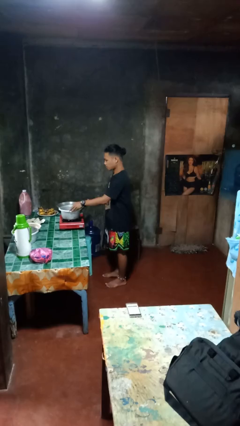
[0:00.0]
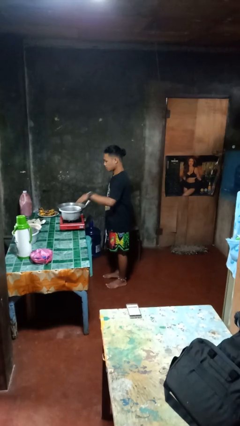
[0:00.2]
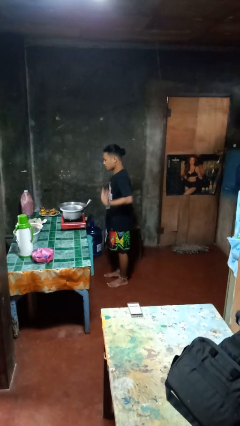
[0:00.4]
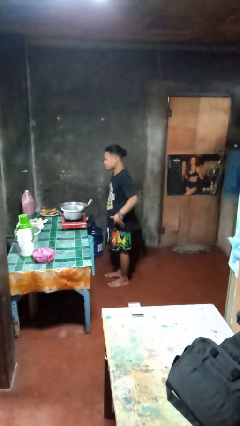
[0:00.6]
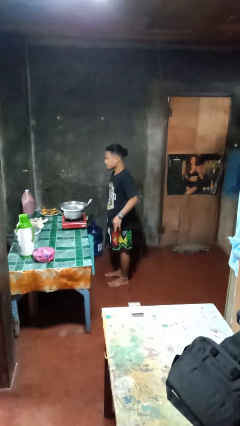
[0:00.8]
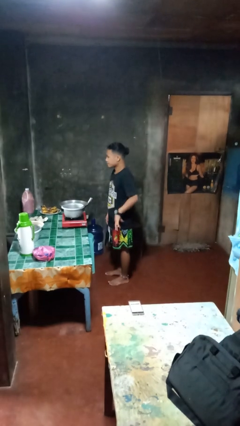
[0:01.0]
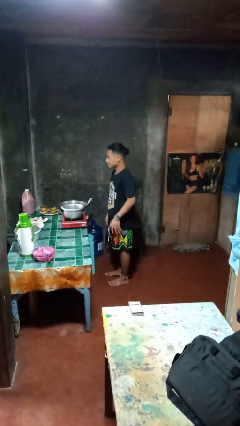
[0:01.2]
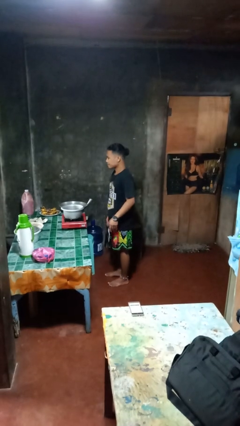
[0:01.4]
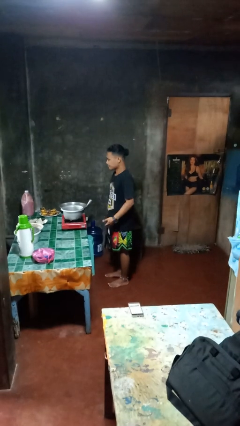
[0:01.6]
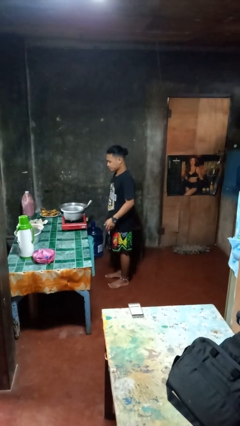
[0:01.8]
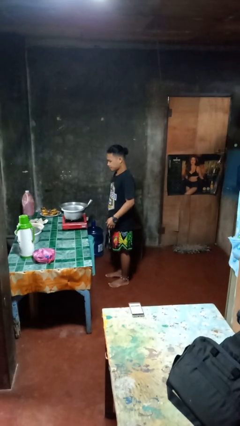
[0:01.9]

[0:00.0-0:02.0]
person burns hand

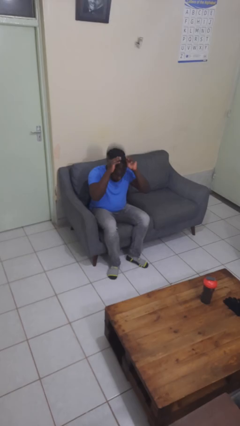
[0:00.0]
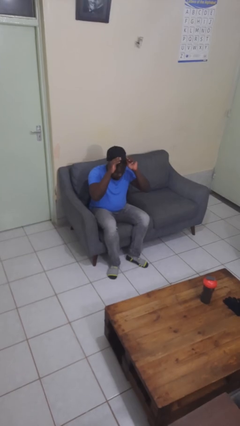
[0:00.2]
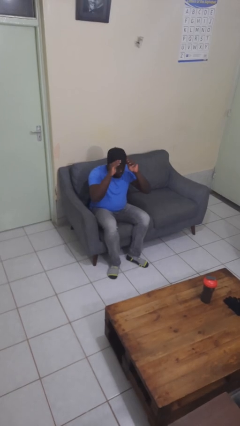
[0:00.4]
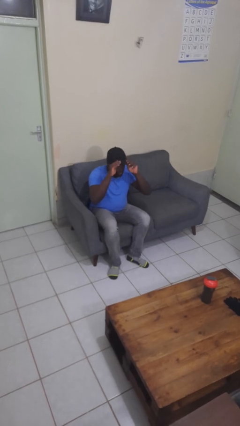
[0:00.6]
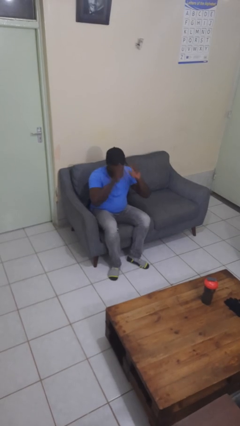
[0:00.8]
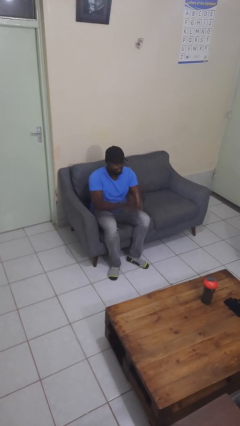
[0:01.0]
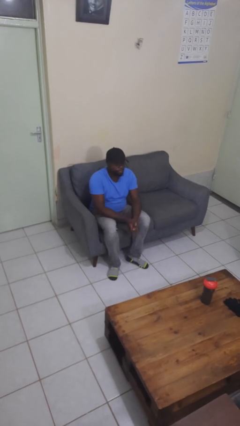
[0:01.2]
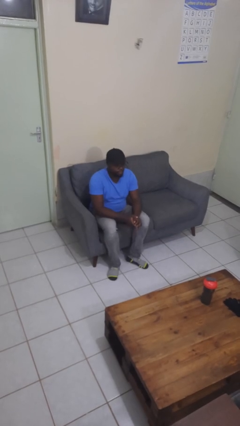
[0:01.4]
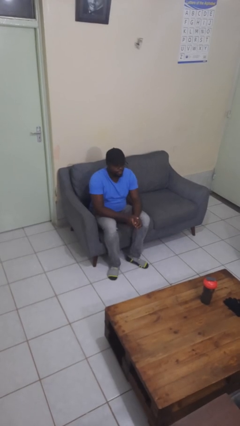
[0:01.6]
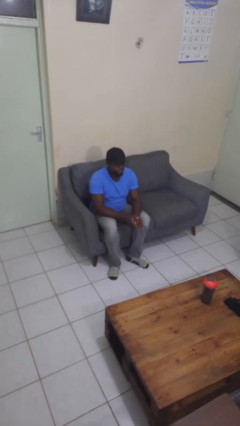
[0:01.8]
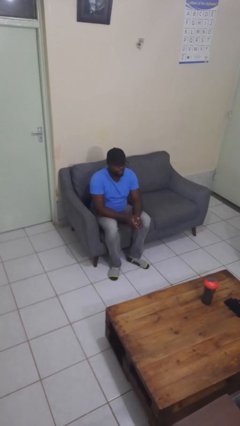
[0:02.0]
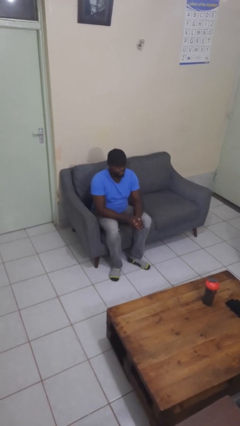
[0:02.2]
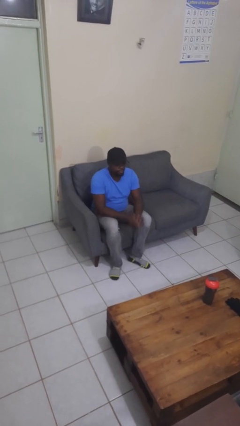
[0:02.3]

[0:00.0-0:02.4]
person puts on hat

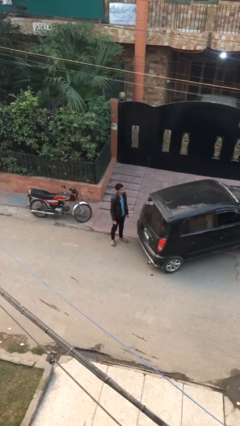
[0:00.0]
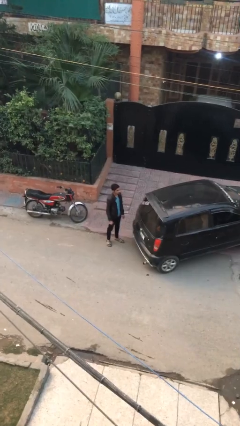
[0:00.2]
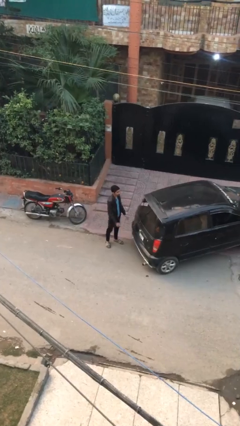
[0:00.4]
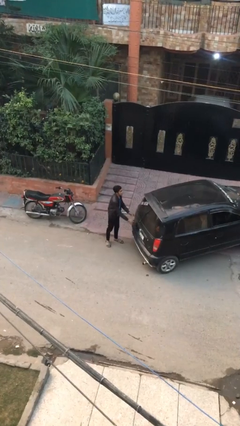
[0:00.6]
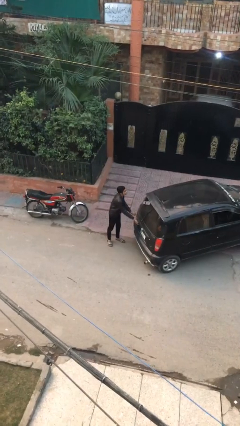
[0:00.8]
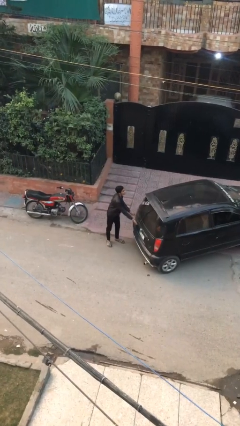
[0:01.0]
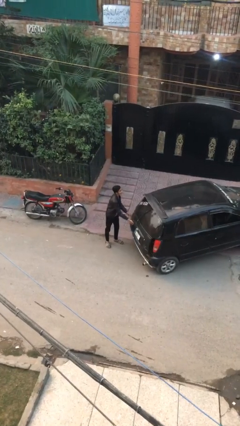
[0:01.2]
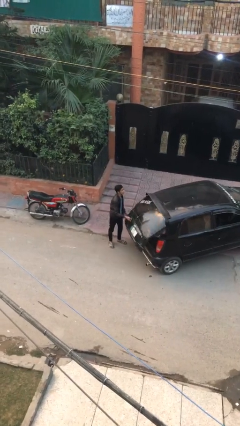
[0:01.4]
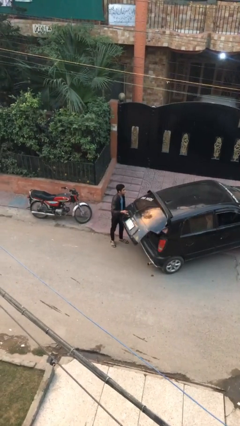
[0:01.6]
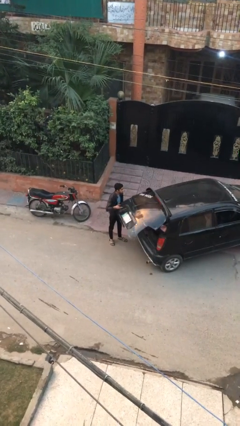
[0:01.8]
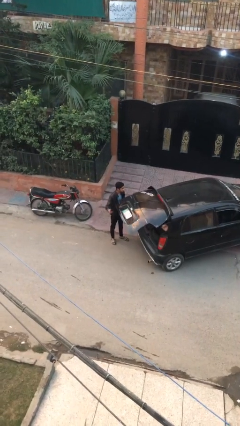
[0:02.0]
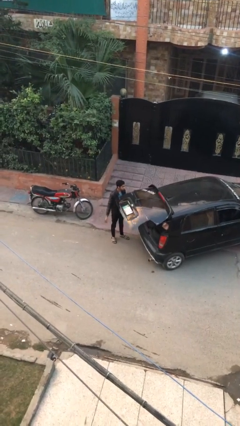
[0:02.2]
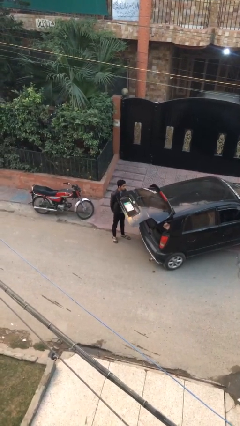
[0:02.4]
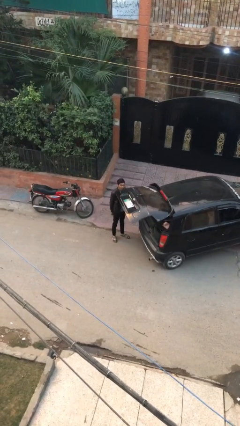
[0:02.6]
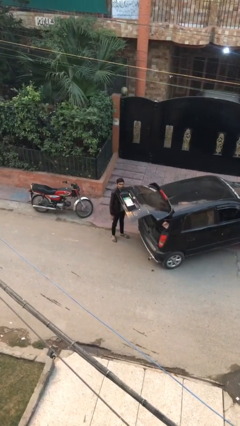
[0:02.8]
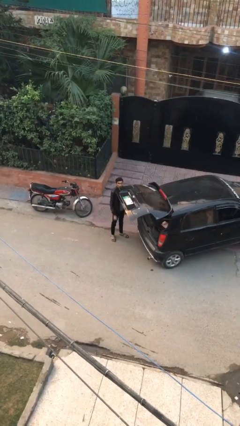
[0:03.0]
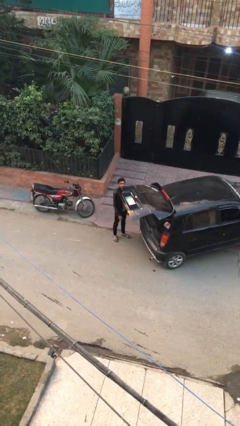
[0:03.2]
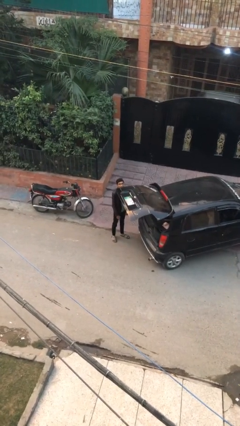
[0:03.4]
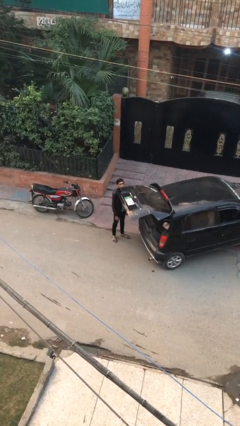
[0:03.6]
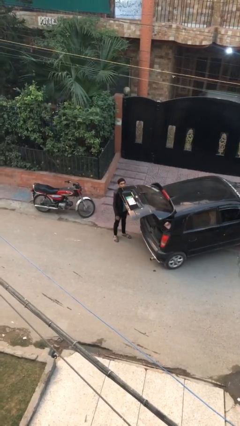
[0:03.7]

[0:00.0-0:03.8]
person opens car trunk

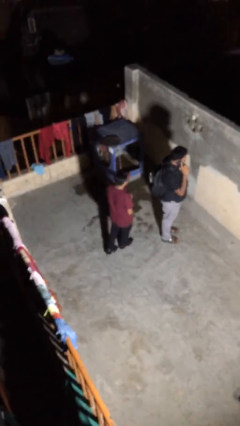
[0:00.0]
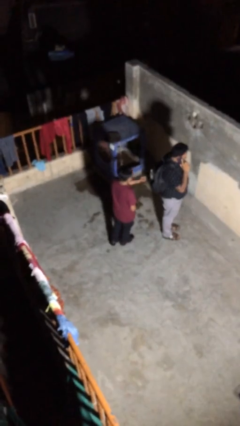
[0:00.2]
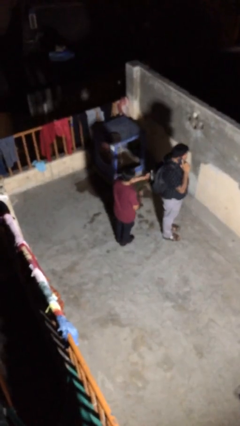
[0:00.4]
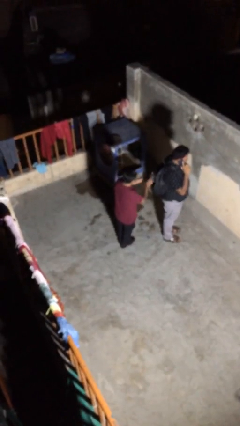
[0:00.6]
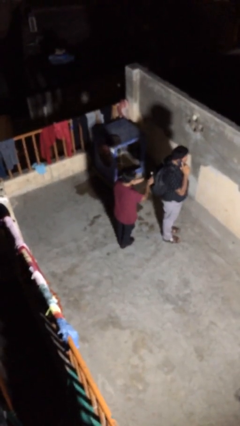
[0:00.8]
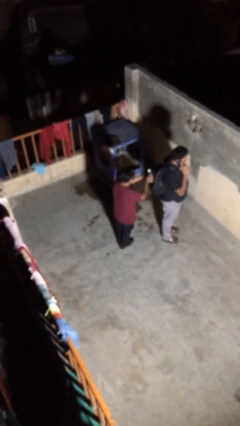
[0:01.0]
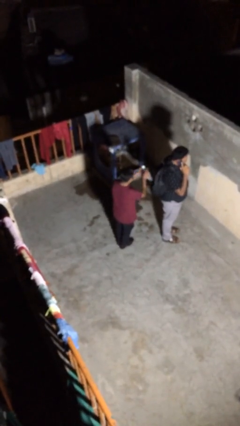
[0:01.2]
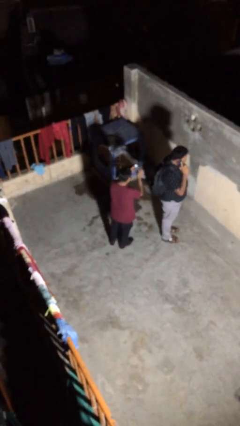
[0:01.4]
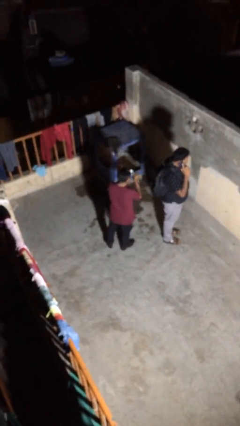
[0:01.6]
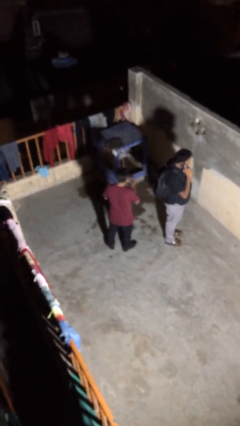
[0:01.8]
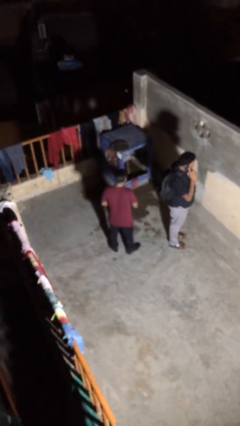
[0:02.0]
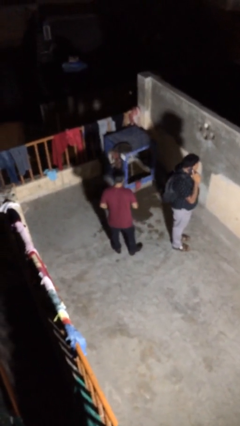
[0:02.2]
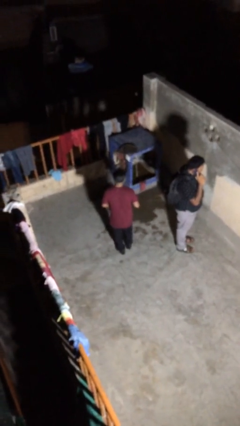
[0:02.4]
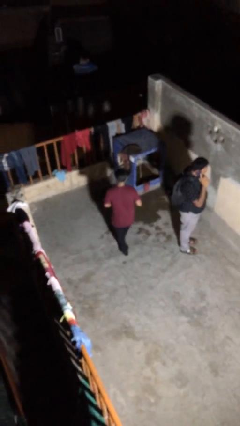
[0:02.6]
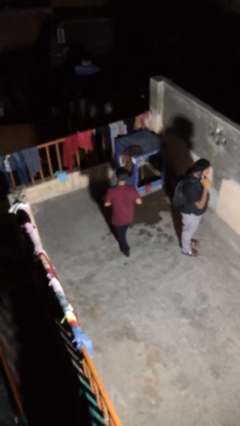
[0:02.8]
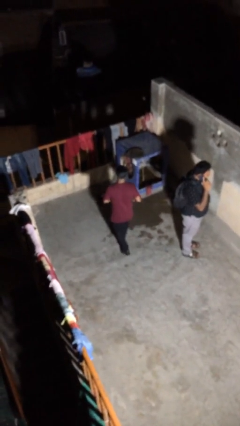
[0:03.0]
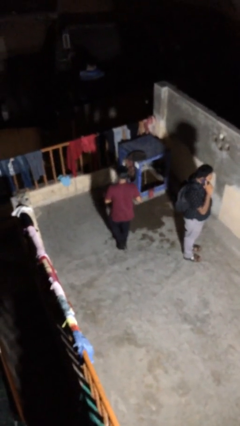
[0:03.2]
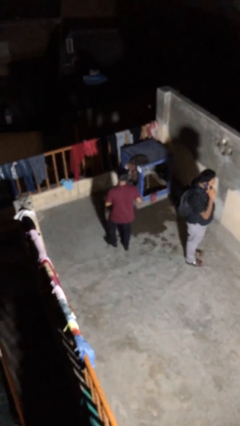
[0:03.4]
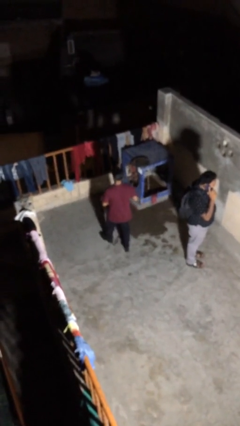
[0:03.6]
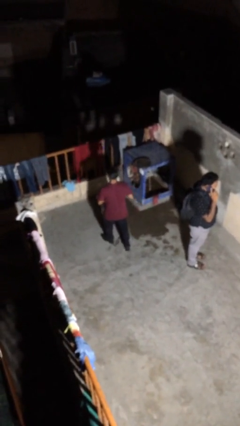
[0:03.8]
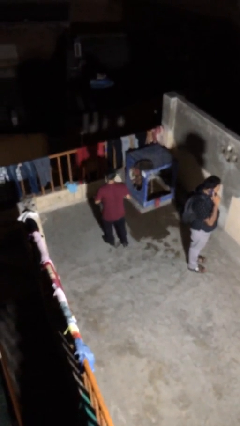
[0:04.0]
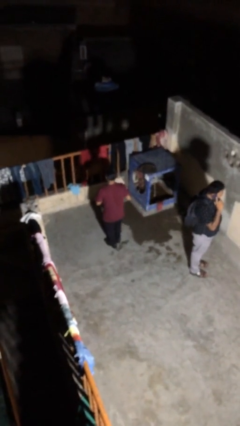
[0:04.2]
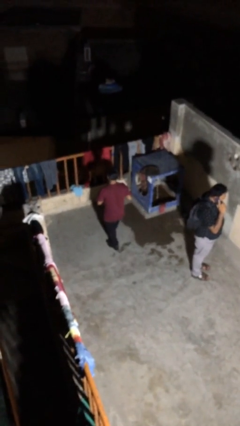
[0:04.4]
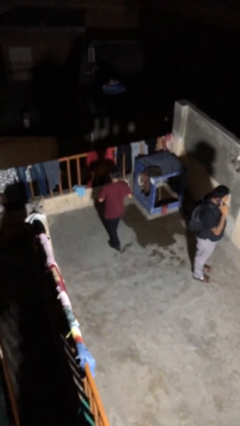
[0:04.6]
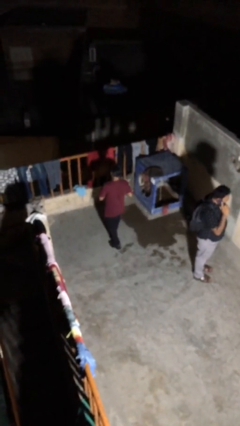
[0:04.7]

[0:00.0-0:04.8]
person steals object from person

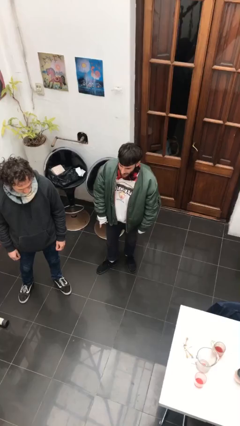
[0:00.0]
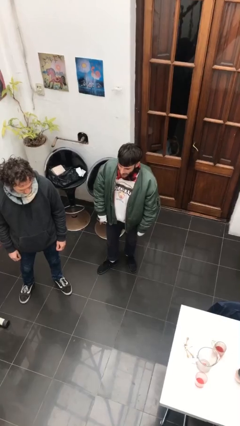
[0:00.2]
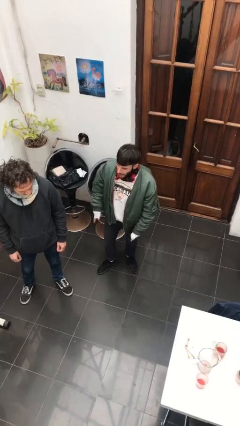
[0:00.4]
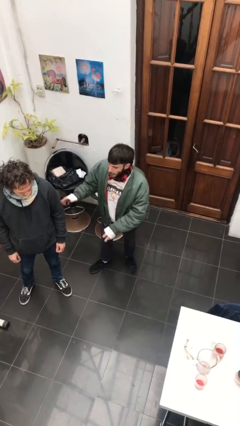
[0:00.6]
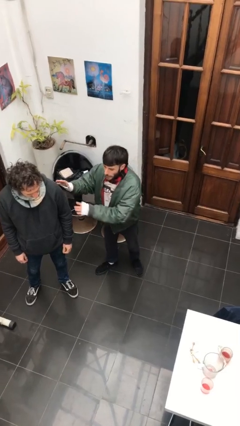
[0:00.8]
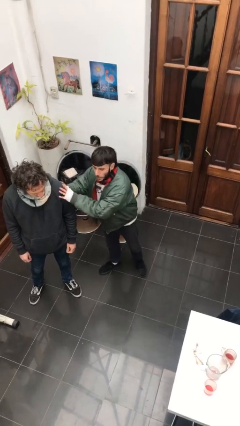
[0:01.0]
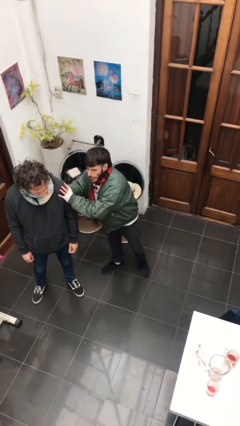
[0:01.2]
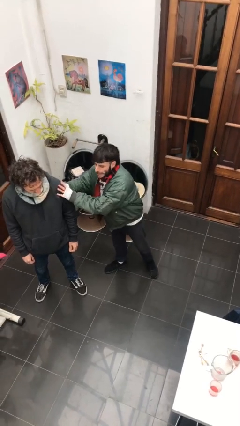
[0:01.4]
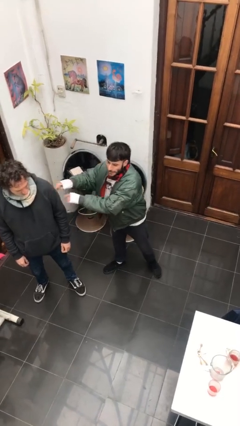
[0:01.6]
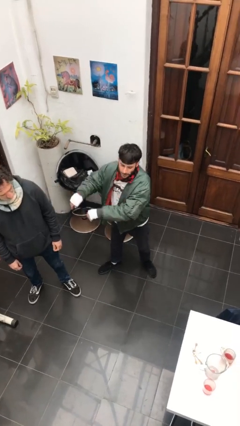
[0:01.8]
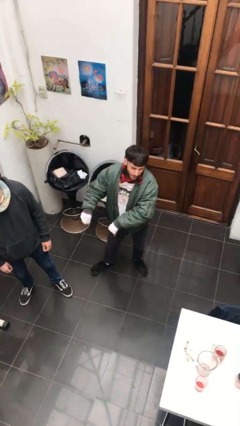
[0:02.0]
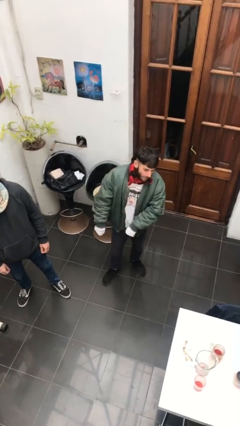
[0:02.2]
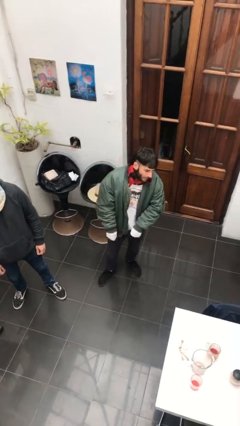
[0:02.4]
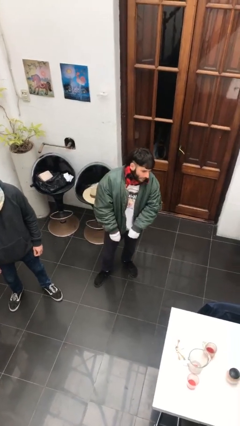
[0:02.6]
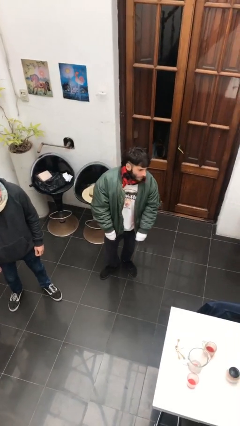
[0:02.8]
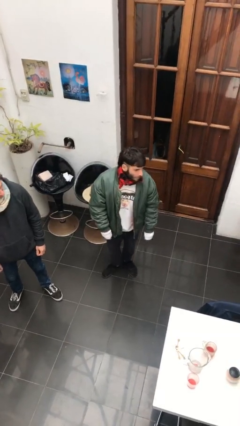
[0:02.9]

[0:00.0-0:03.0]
person shoves person

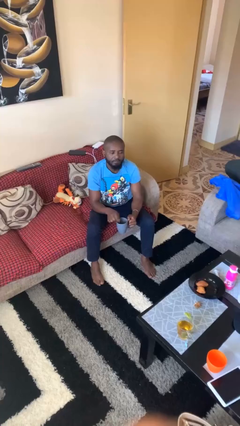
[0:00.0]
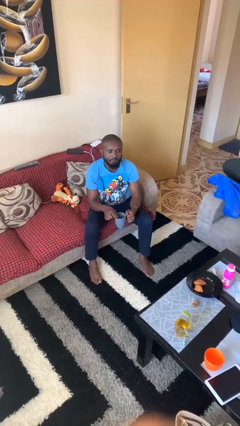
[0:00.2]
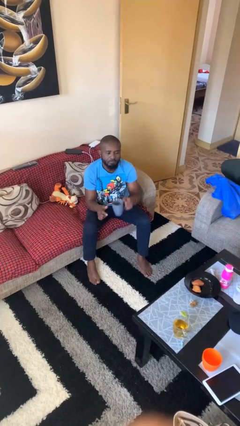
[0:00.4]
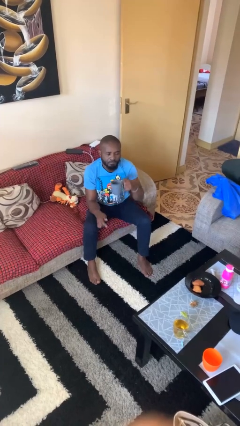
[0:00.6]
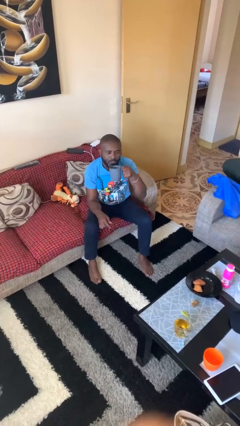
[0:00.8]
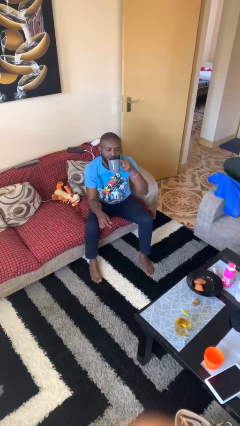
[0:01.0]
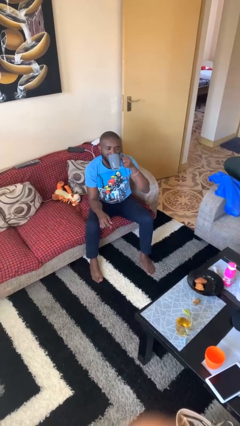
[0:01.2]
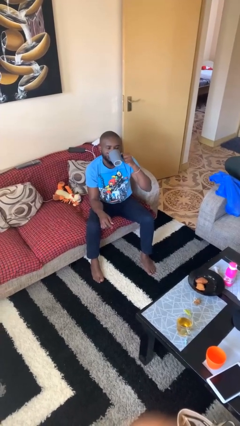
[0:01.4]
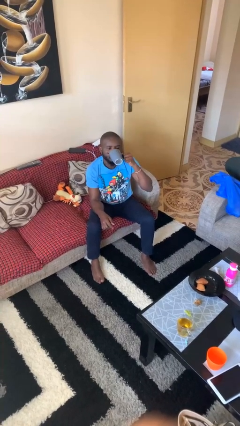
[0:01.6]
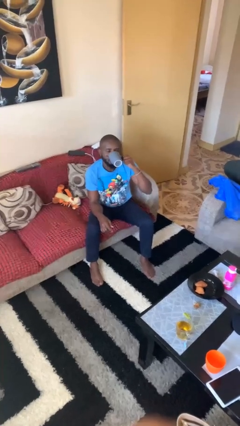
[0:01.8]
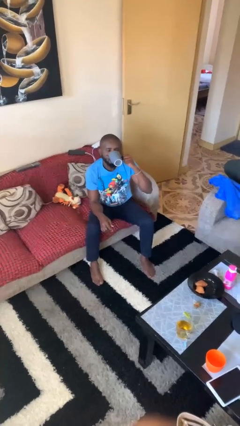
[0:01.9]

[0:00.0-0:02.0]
person drinks from mug
